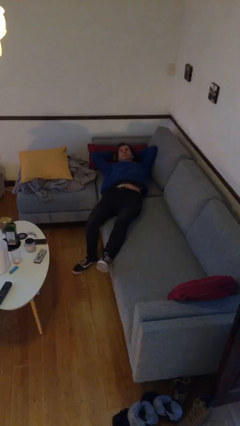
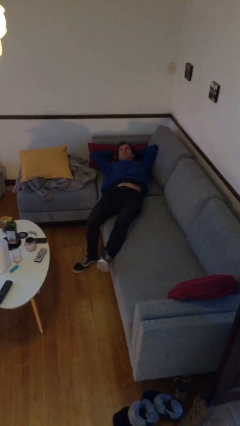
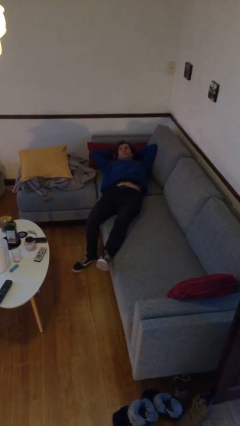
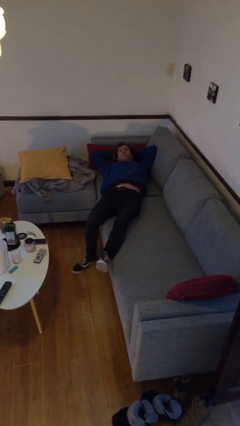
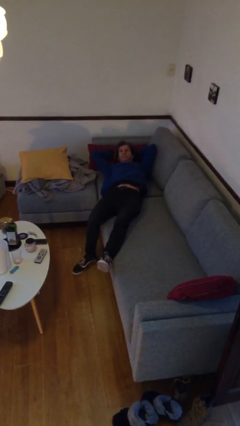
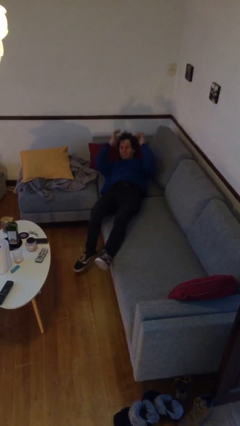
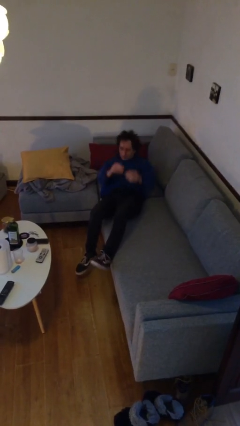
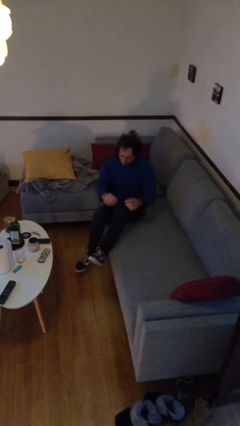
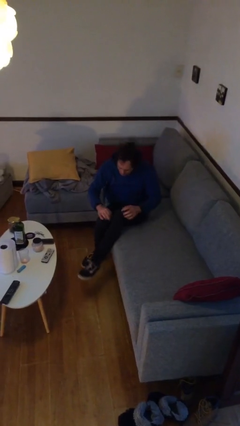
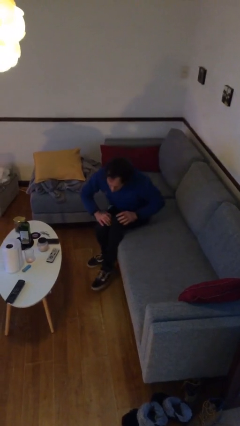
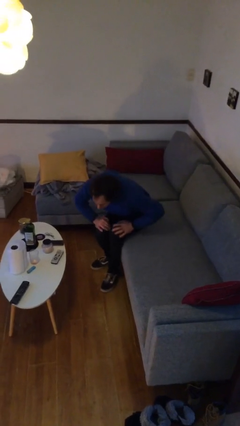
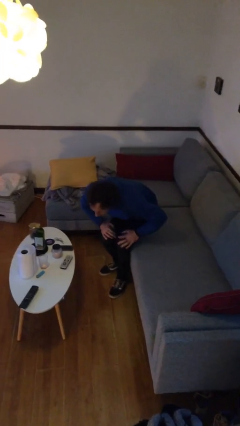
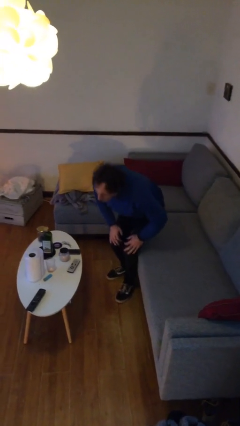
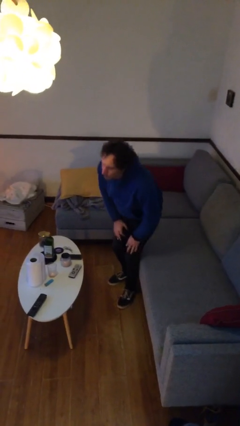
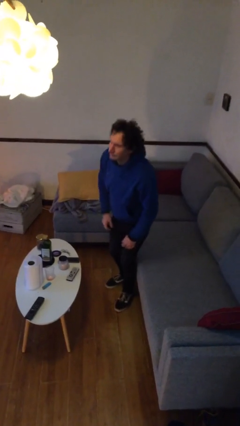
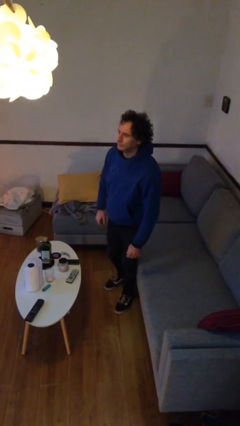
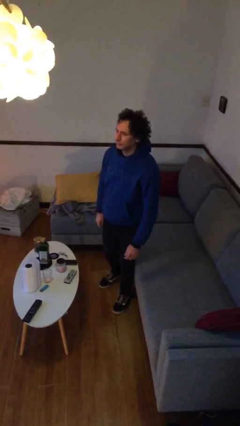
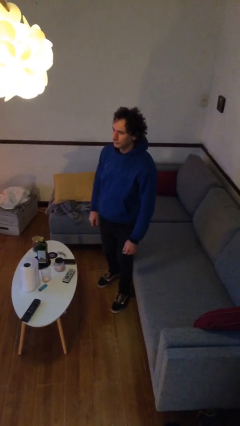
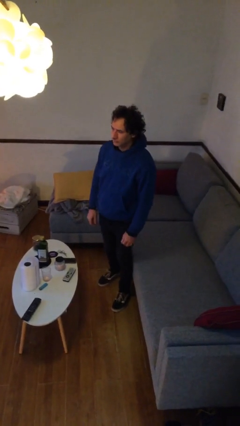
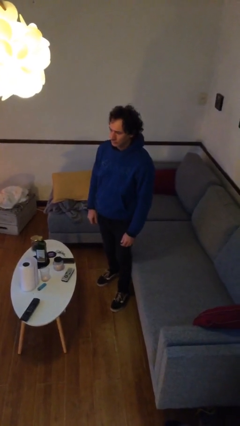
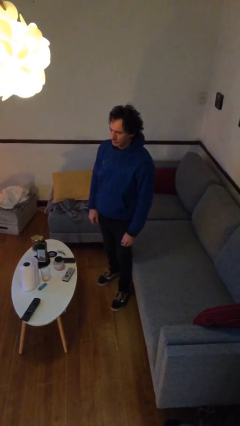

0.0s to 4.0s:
person stands up

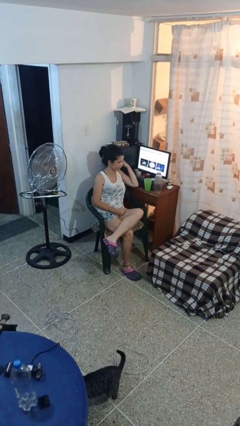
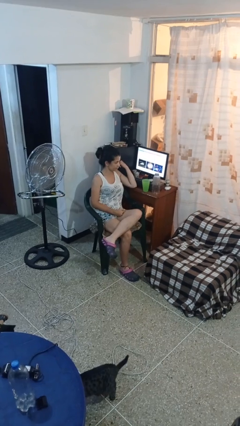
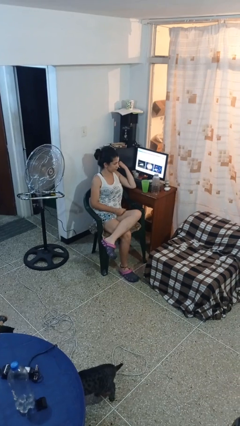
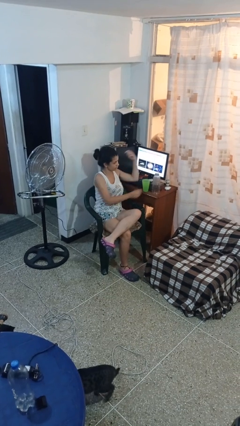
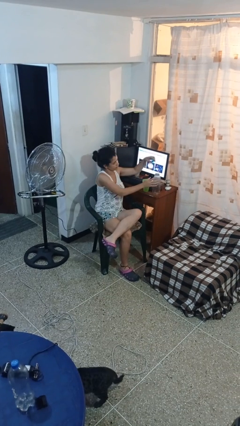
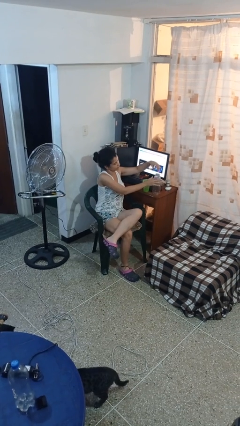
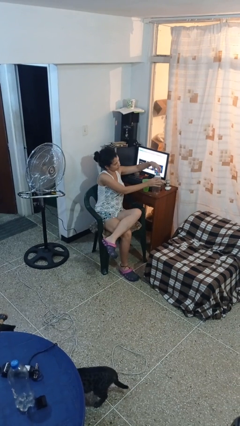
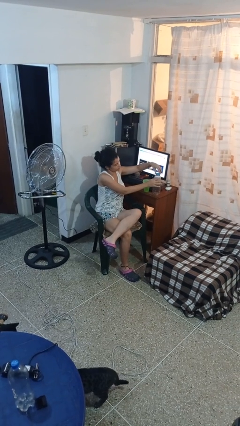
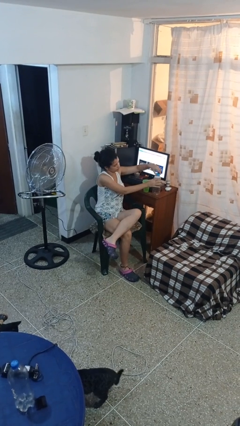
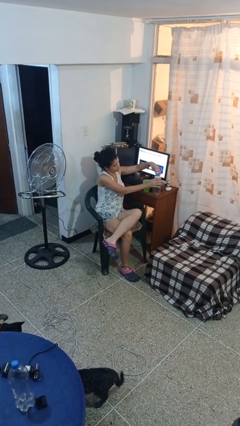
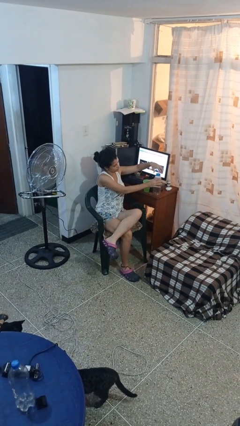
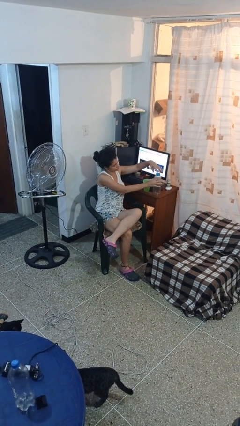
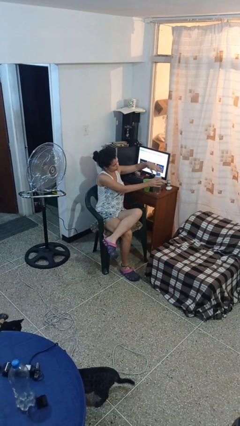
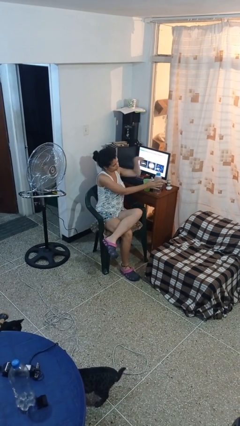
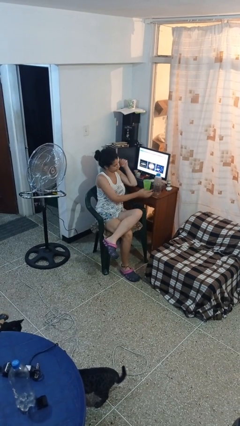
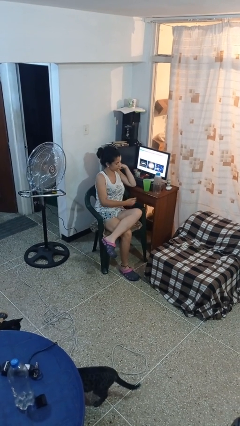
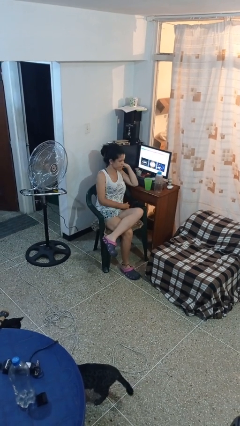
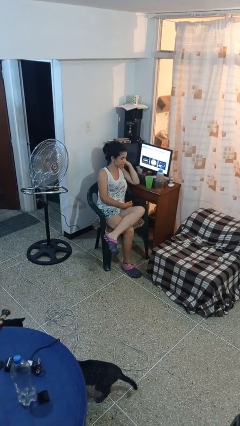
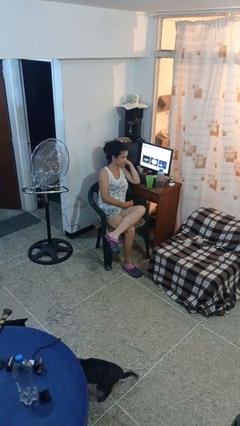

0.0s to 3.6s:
person screws lid to bottle

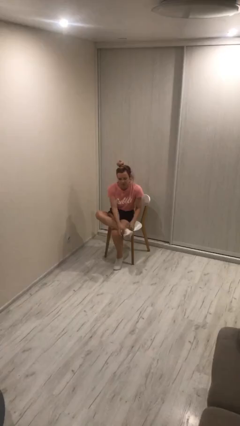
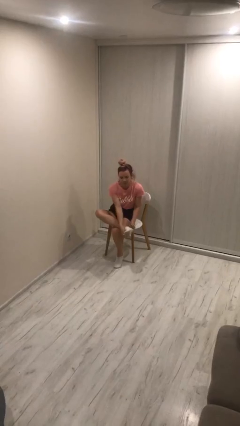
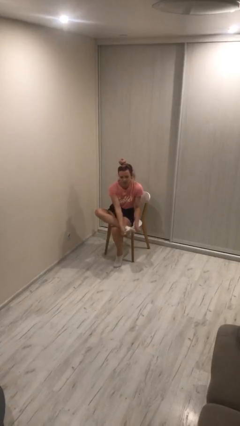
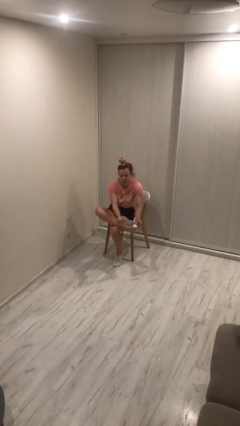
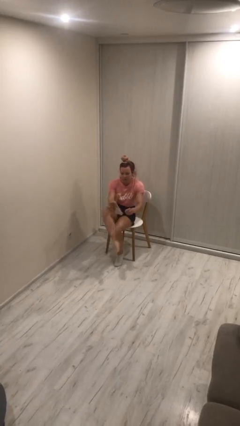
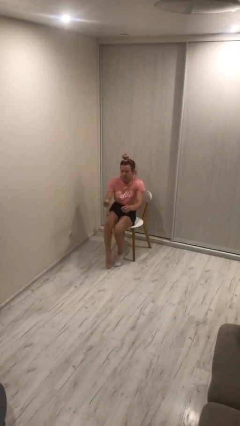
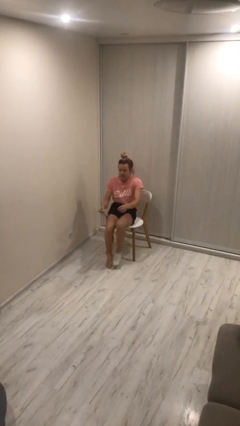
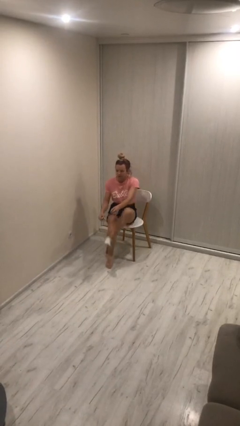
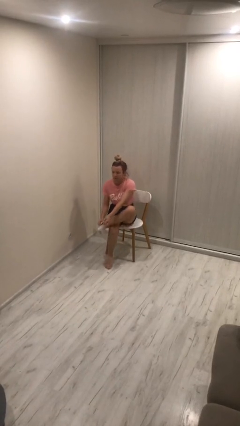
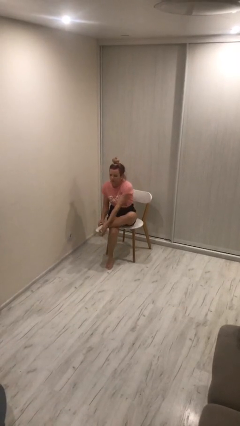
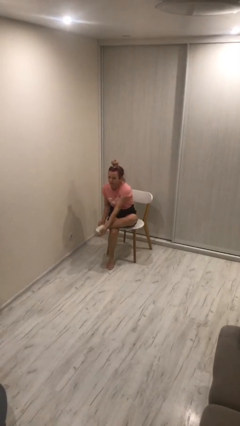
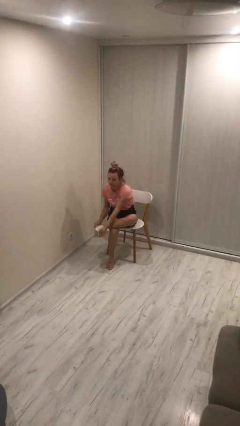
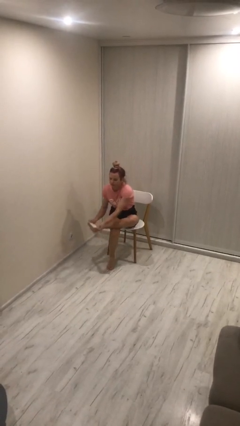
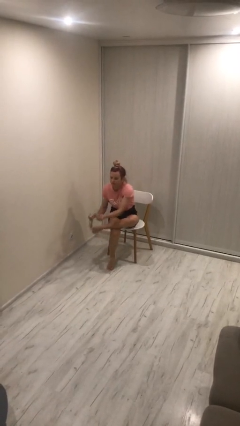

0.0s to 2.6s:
person takes off socks

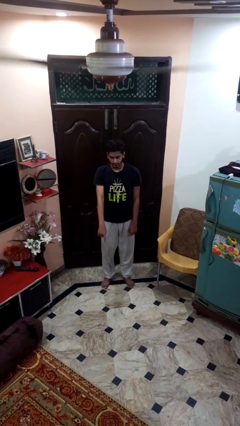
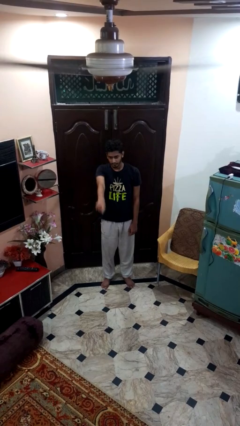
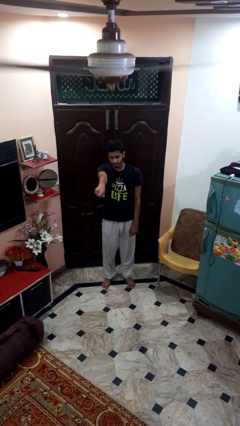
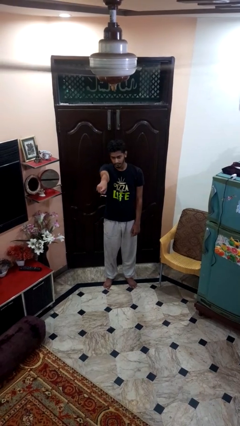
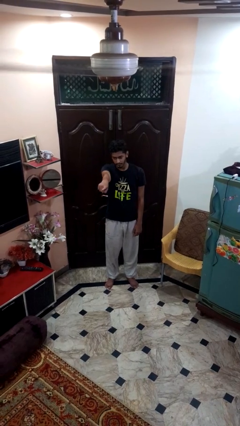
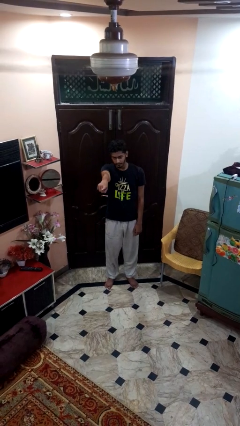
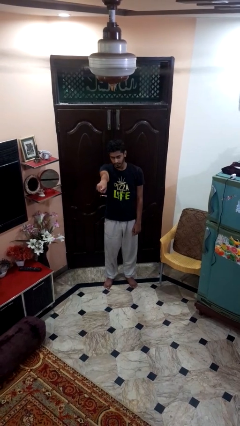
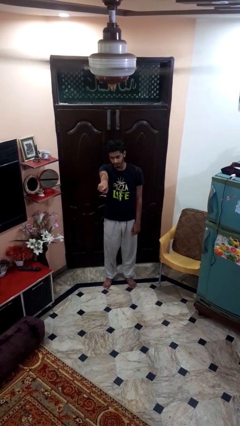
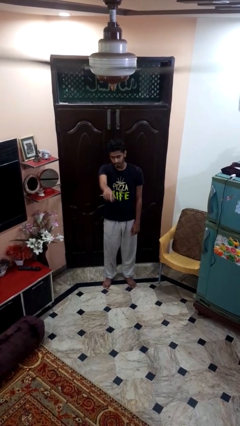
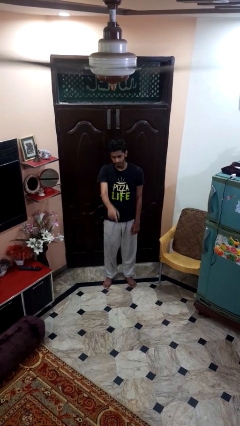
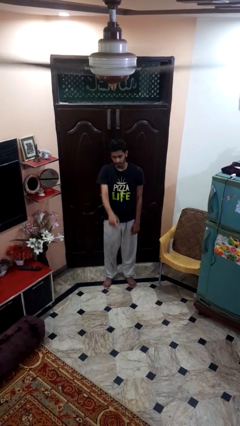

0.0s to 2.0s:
person points at person

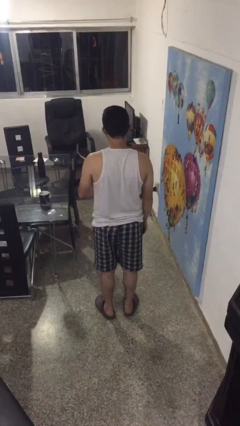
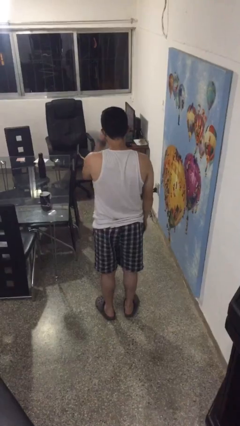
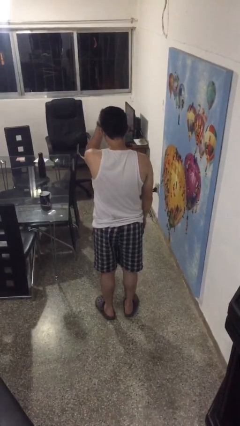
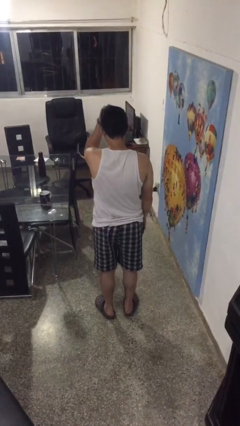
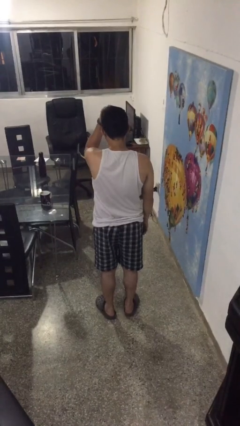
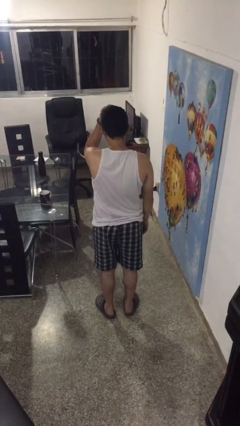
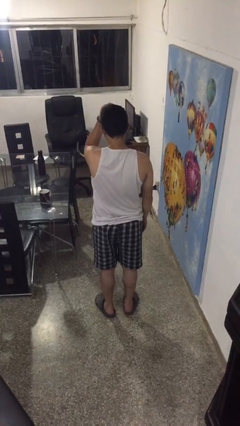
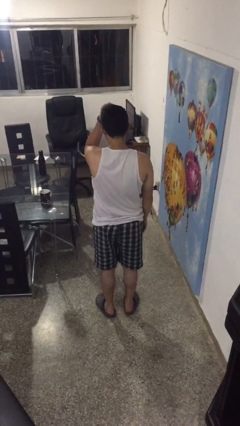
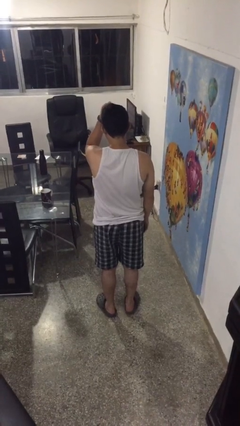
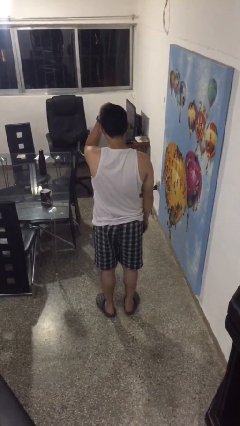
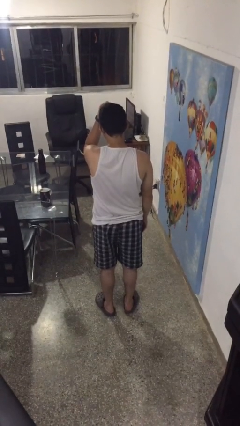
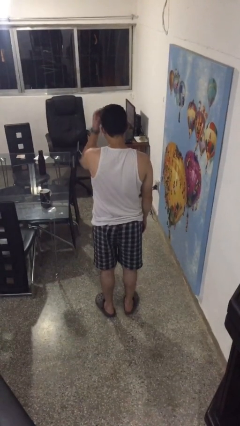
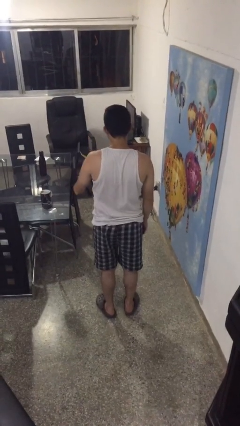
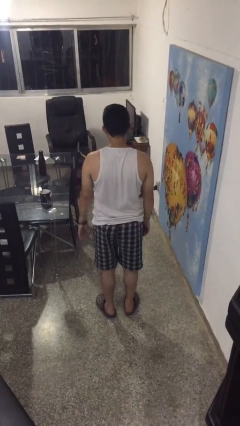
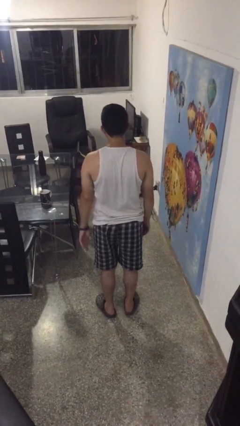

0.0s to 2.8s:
person scratches face

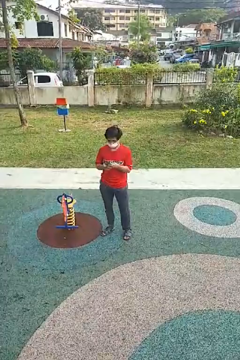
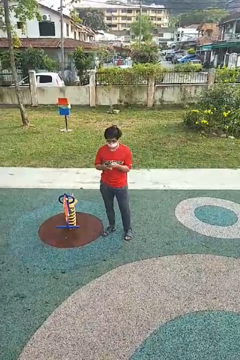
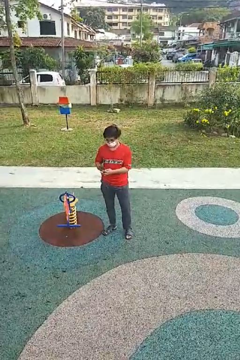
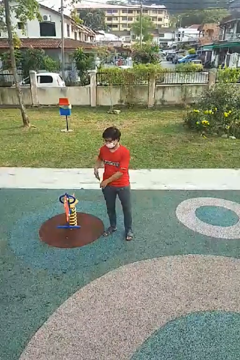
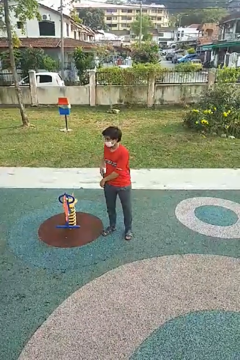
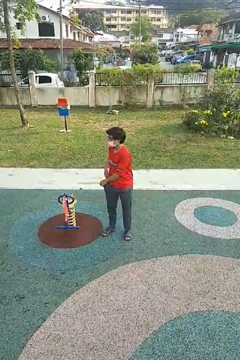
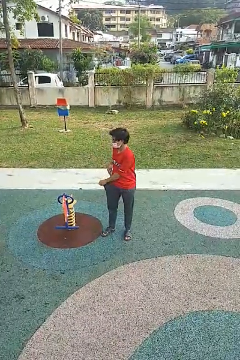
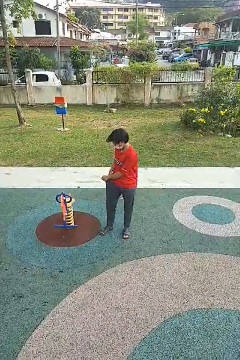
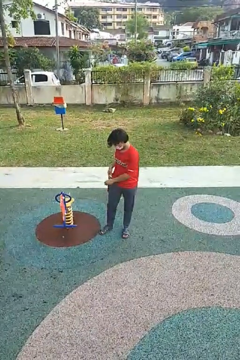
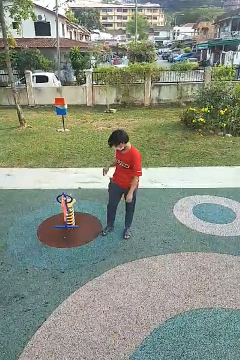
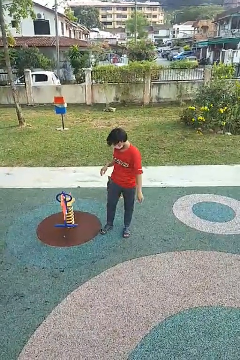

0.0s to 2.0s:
person puts phone into pocket

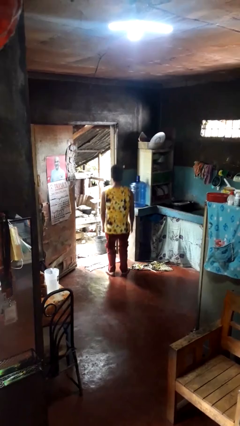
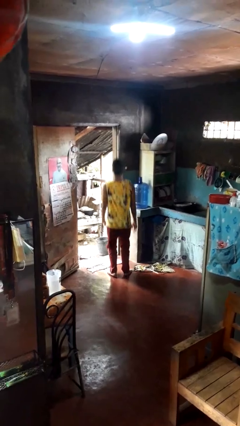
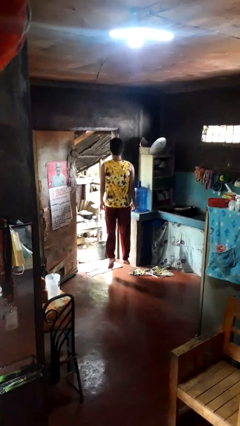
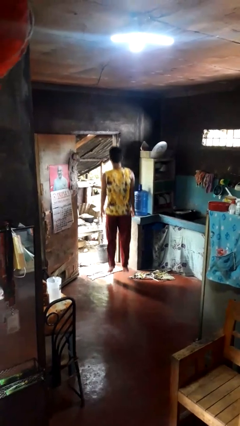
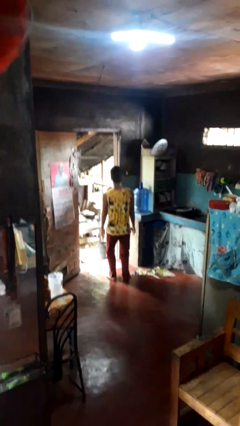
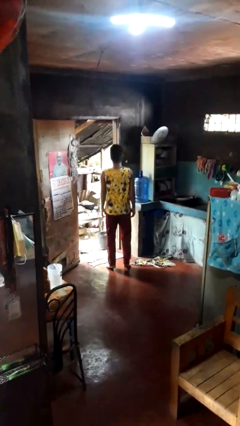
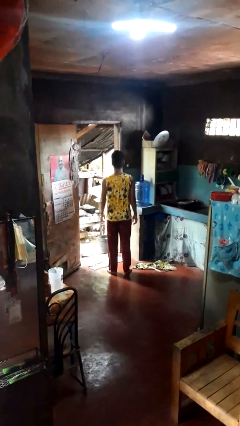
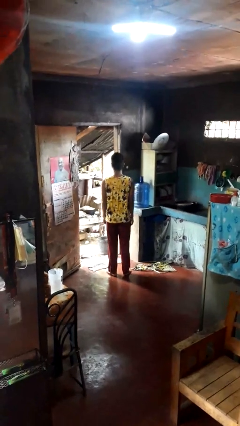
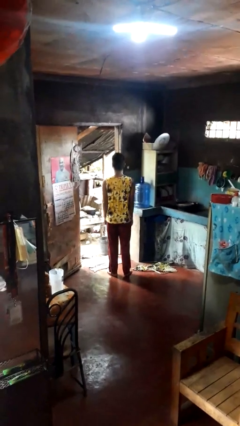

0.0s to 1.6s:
person jumps
